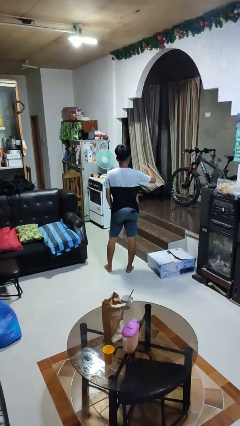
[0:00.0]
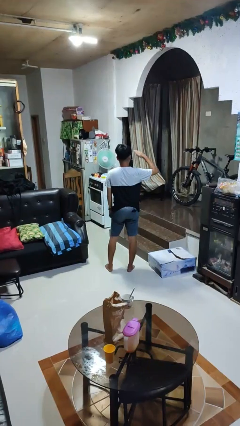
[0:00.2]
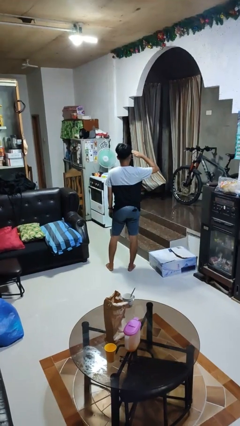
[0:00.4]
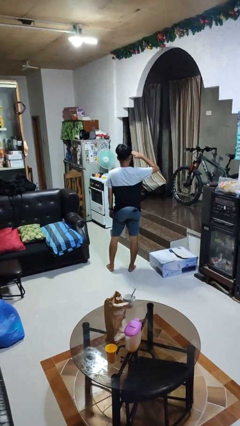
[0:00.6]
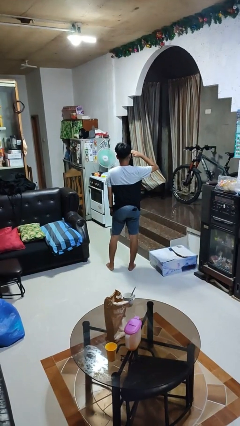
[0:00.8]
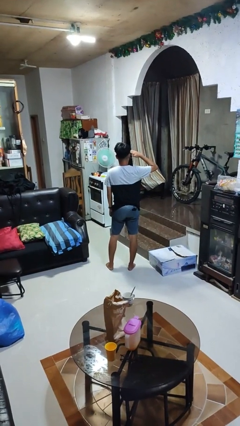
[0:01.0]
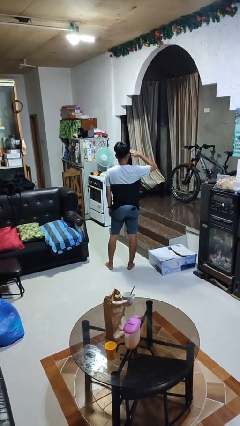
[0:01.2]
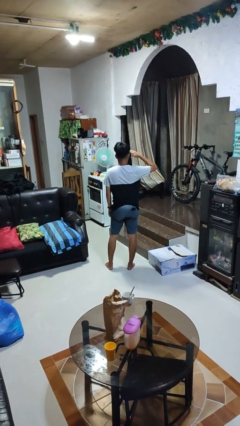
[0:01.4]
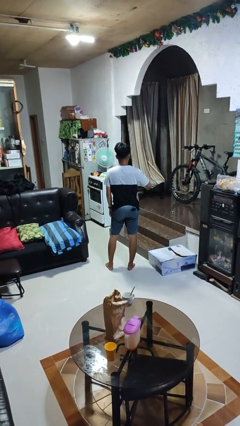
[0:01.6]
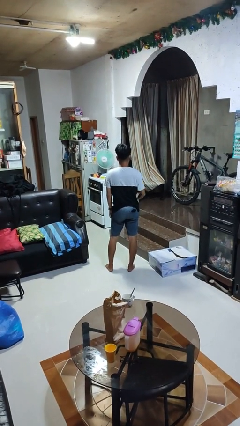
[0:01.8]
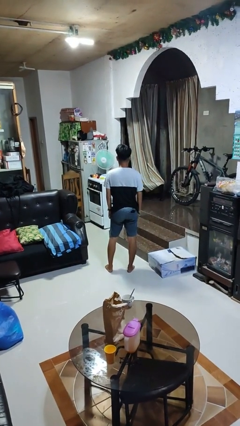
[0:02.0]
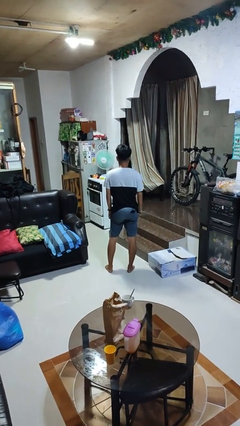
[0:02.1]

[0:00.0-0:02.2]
person salutes

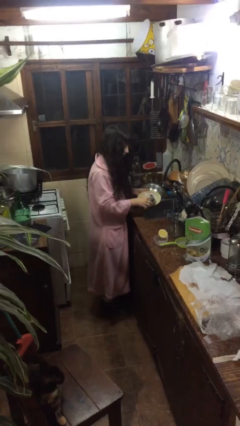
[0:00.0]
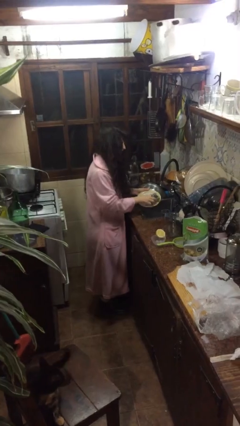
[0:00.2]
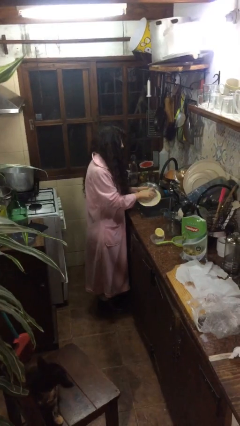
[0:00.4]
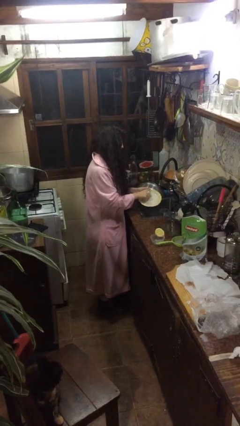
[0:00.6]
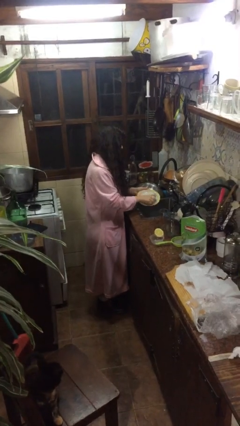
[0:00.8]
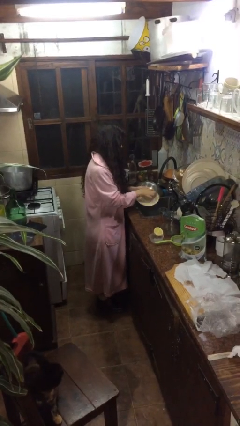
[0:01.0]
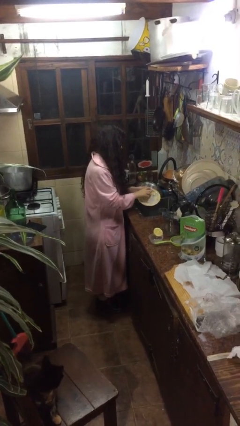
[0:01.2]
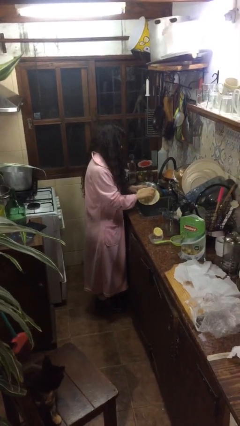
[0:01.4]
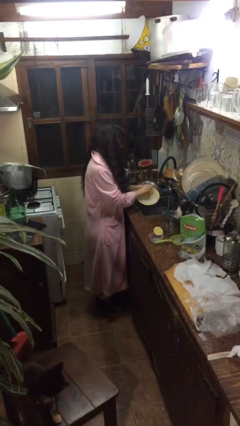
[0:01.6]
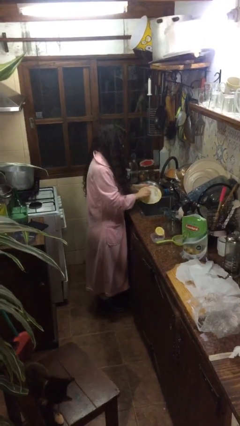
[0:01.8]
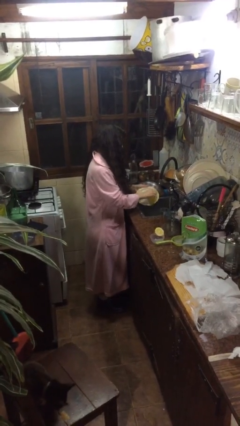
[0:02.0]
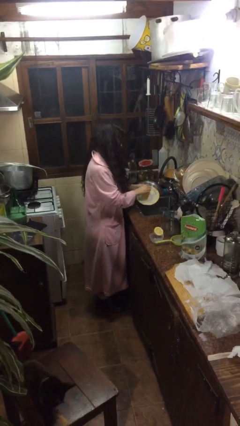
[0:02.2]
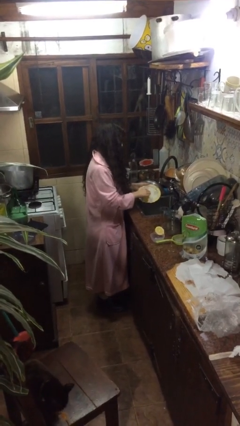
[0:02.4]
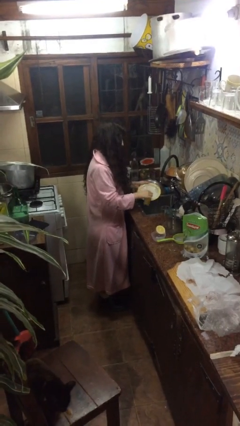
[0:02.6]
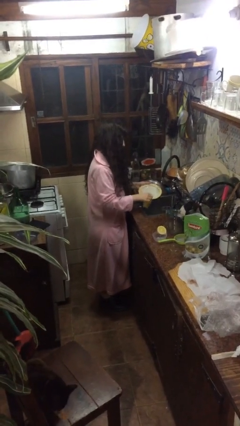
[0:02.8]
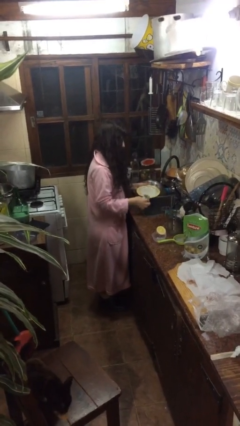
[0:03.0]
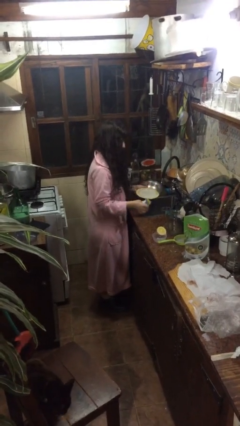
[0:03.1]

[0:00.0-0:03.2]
person washes dish

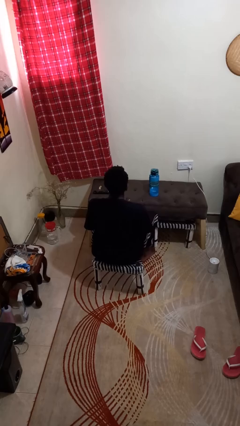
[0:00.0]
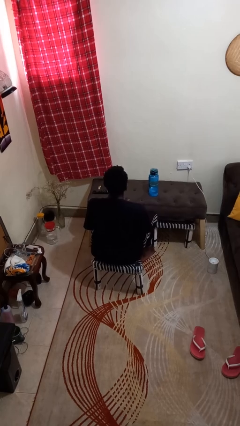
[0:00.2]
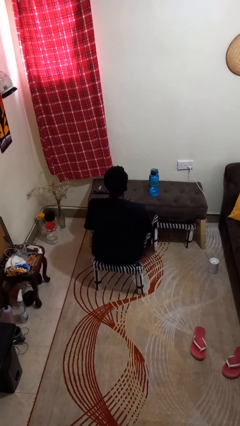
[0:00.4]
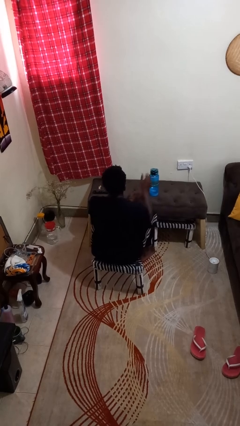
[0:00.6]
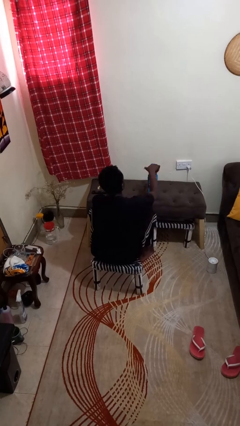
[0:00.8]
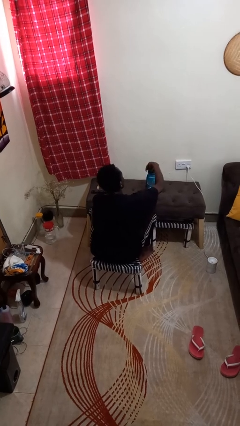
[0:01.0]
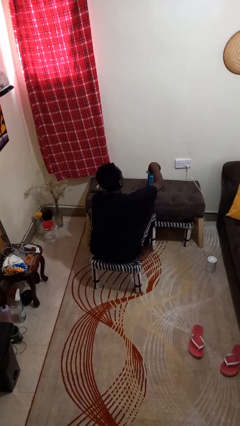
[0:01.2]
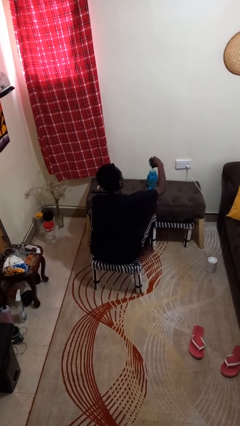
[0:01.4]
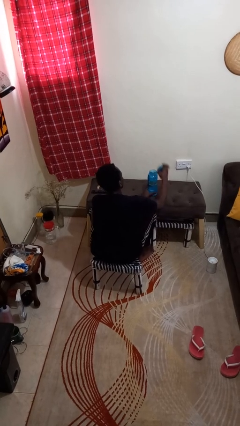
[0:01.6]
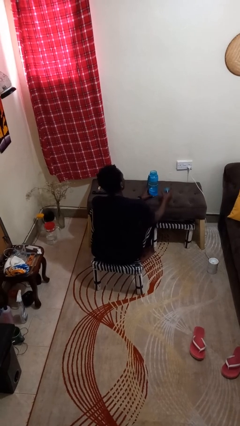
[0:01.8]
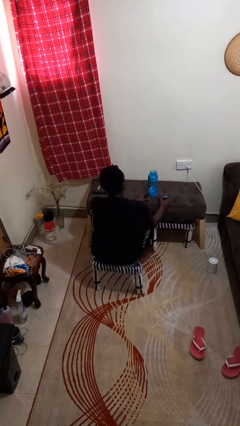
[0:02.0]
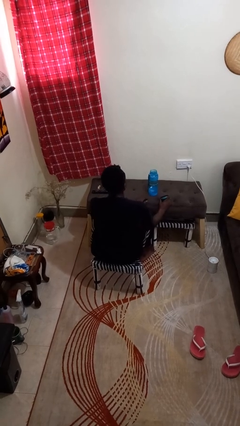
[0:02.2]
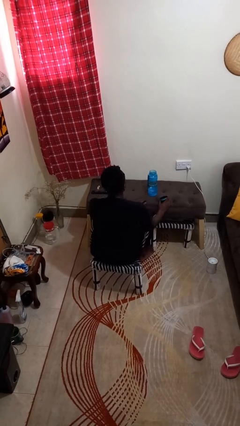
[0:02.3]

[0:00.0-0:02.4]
person opens jar

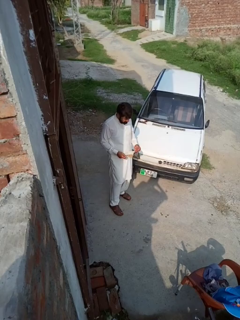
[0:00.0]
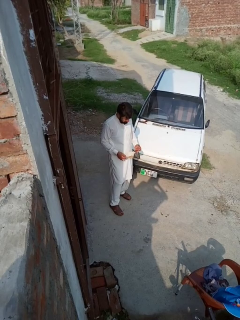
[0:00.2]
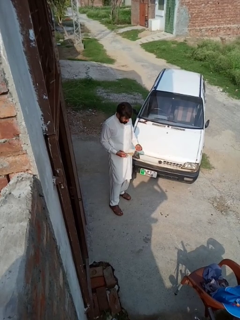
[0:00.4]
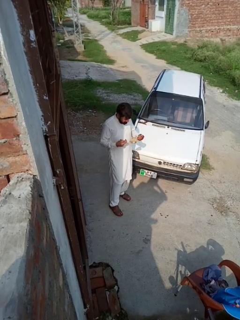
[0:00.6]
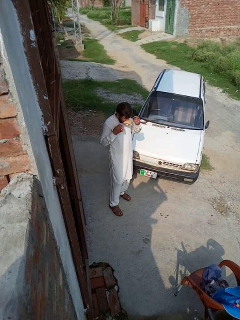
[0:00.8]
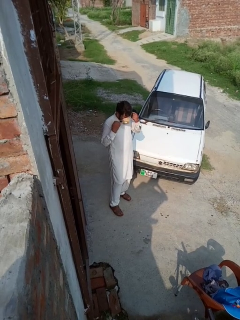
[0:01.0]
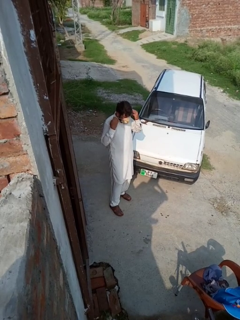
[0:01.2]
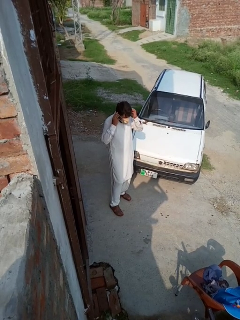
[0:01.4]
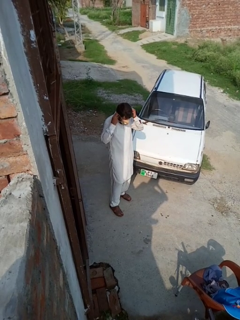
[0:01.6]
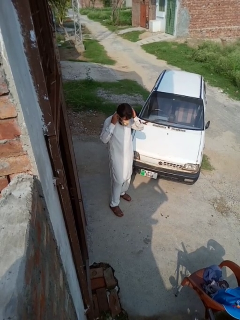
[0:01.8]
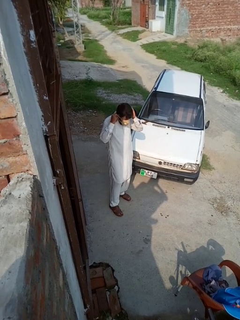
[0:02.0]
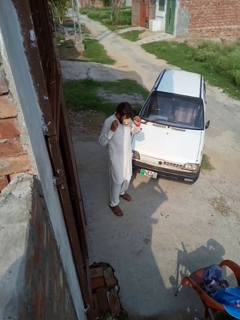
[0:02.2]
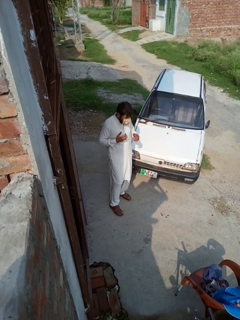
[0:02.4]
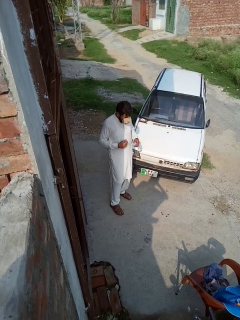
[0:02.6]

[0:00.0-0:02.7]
person puts on facemask

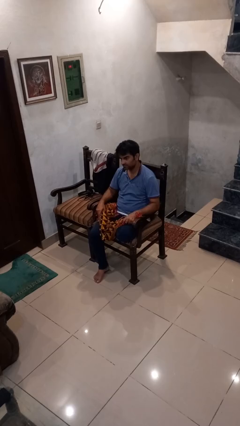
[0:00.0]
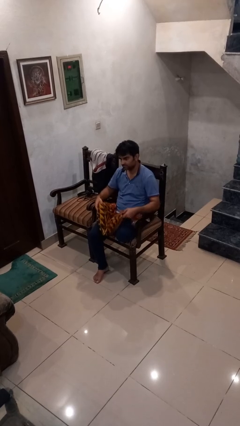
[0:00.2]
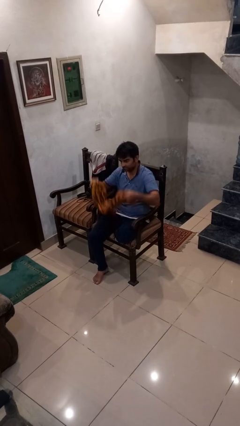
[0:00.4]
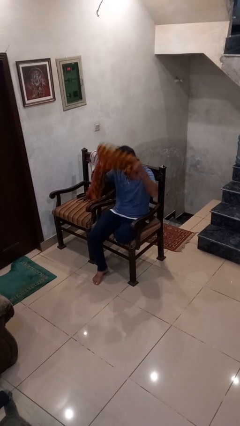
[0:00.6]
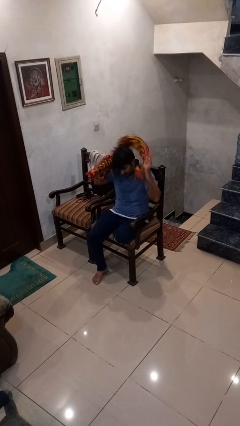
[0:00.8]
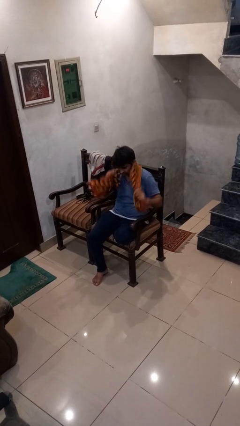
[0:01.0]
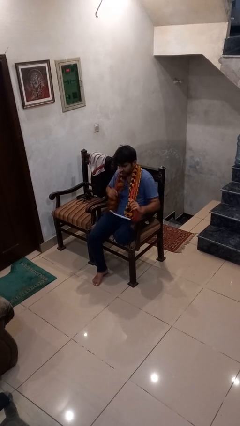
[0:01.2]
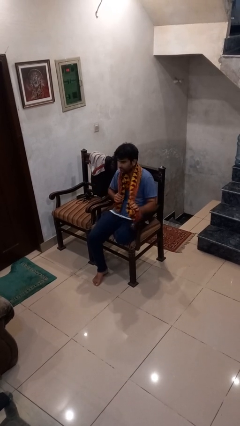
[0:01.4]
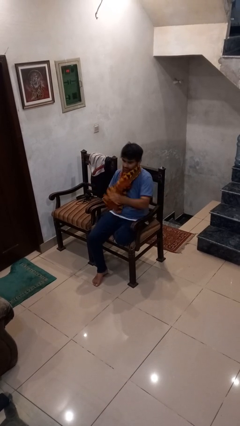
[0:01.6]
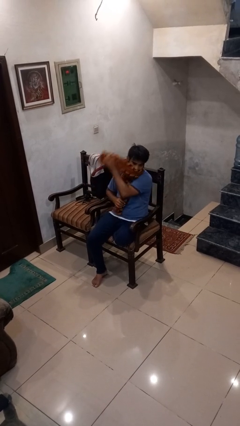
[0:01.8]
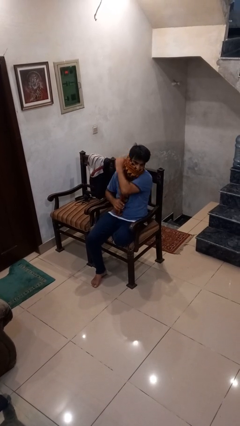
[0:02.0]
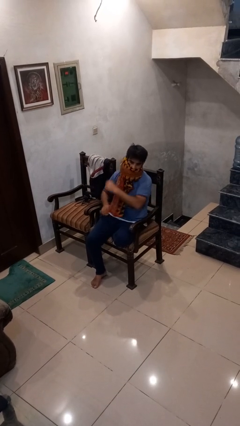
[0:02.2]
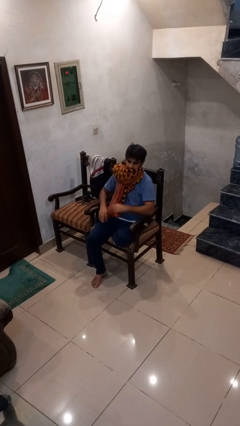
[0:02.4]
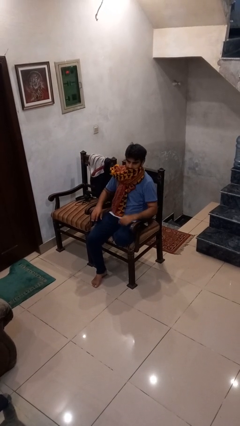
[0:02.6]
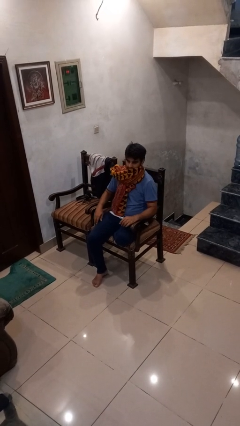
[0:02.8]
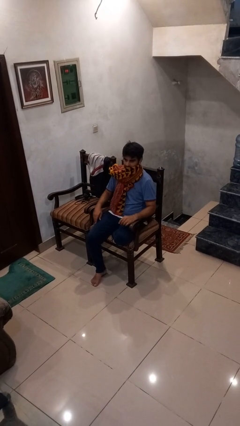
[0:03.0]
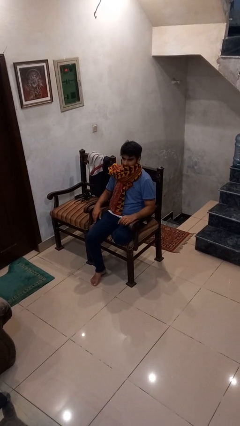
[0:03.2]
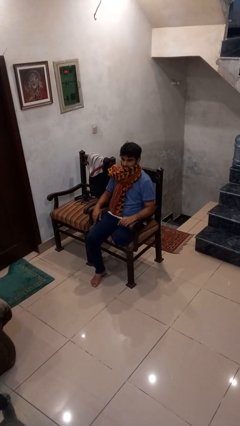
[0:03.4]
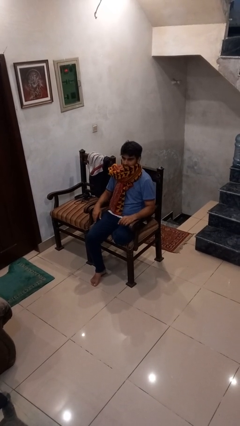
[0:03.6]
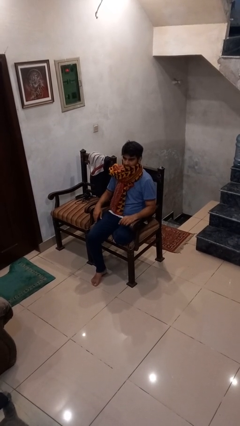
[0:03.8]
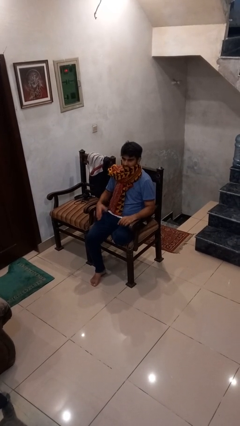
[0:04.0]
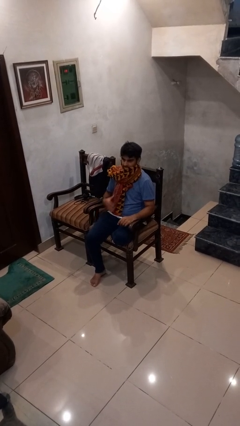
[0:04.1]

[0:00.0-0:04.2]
person puts on scarf

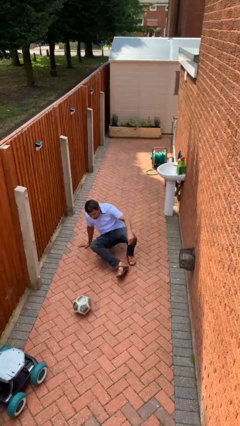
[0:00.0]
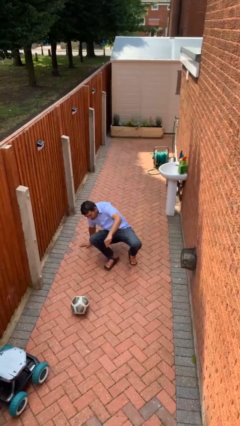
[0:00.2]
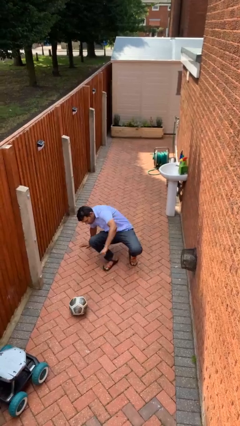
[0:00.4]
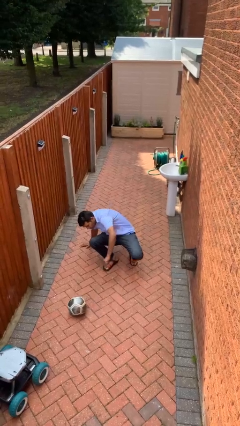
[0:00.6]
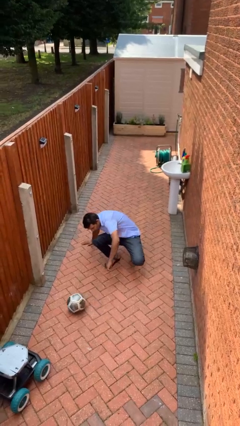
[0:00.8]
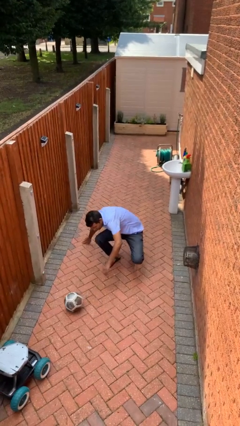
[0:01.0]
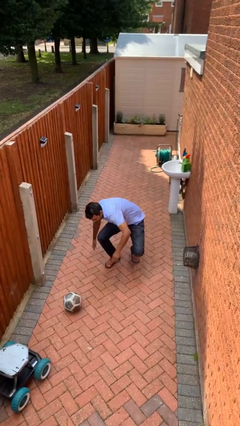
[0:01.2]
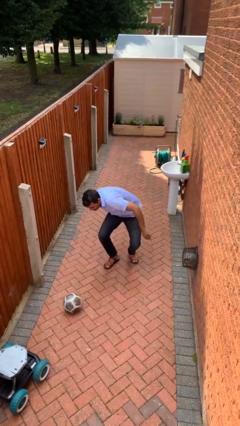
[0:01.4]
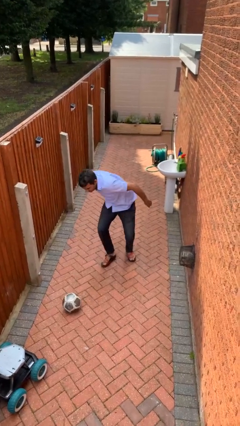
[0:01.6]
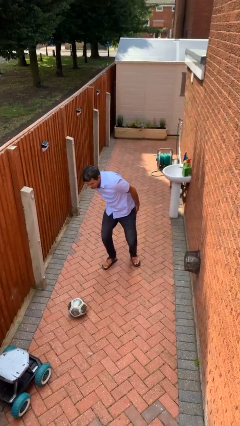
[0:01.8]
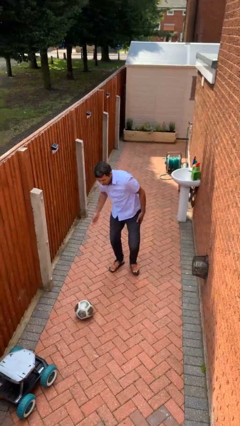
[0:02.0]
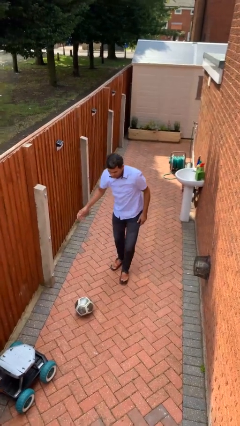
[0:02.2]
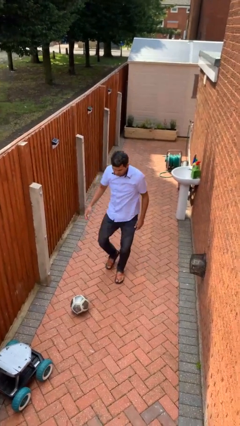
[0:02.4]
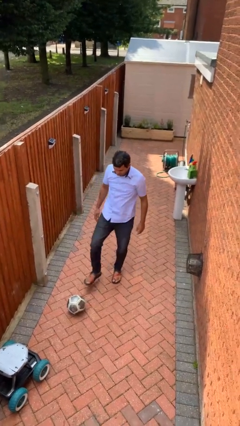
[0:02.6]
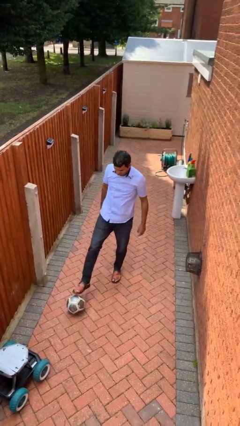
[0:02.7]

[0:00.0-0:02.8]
person stands up from floor

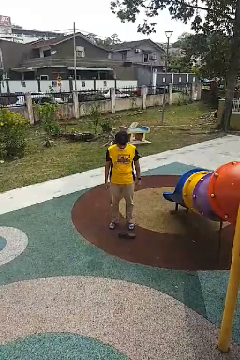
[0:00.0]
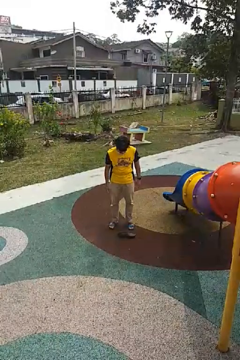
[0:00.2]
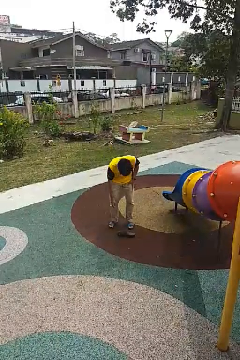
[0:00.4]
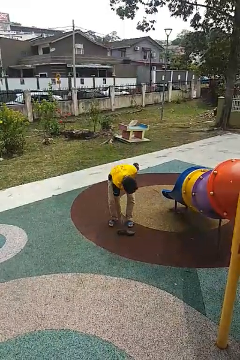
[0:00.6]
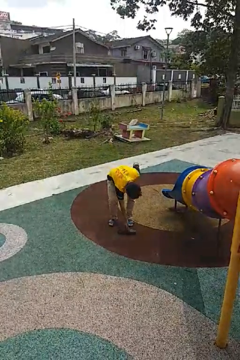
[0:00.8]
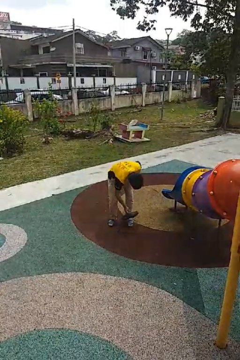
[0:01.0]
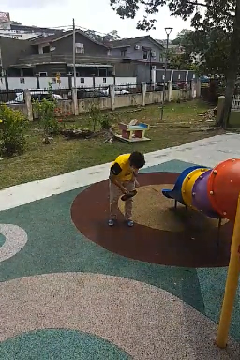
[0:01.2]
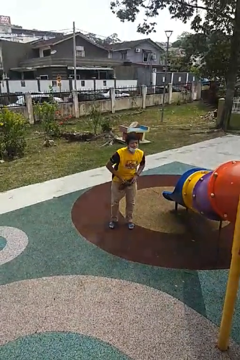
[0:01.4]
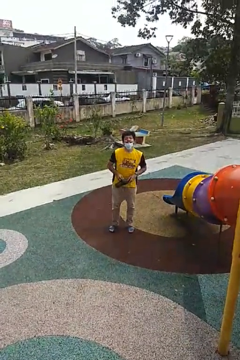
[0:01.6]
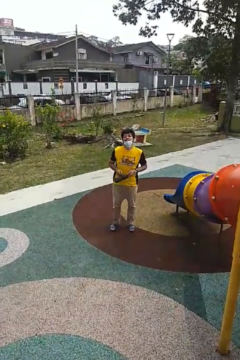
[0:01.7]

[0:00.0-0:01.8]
person picks up object from floor
